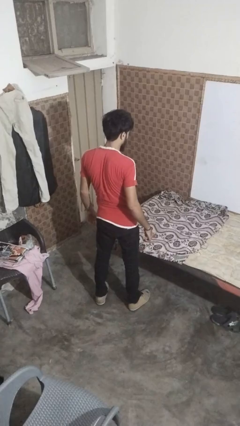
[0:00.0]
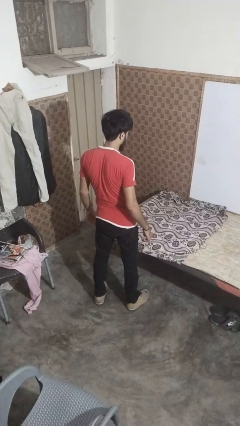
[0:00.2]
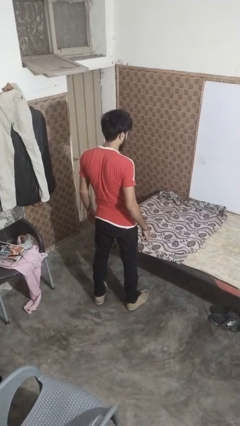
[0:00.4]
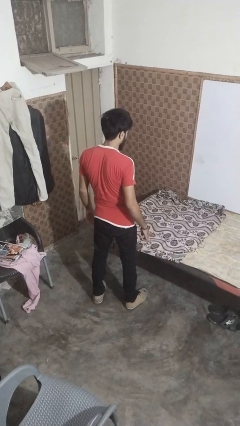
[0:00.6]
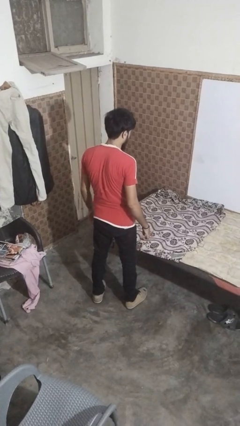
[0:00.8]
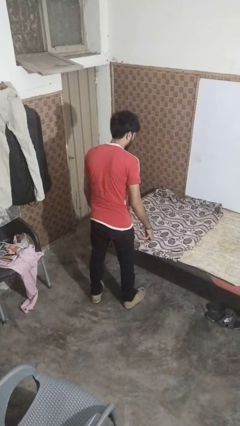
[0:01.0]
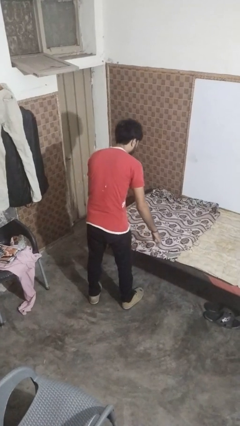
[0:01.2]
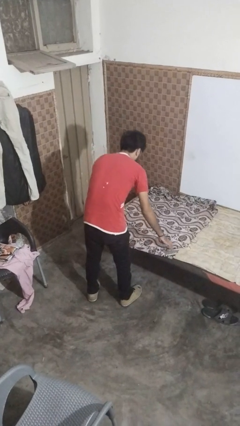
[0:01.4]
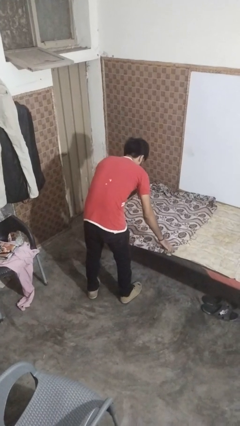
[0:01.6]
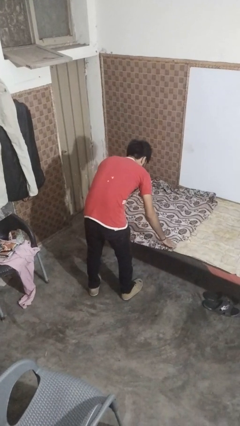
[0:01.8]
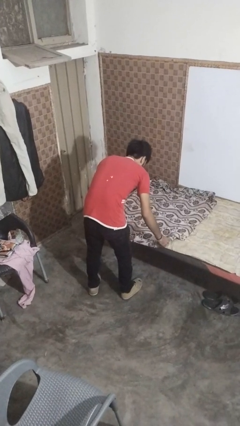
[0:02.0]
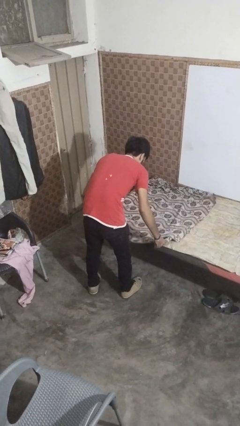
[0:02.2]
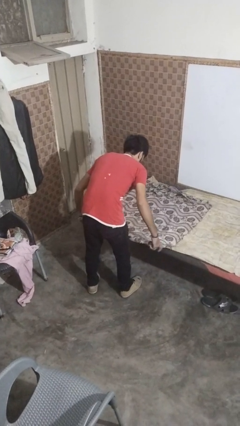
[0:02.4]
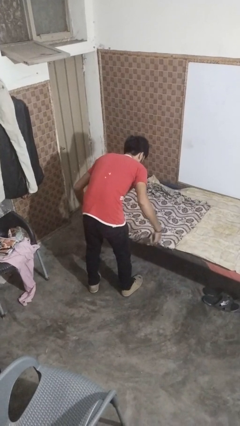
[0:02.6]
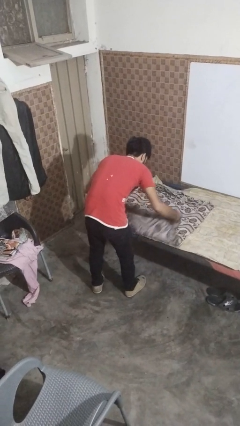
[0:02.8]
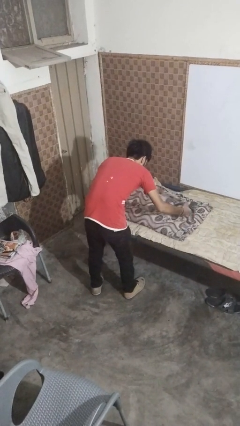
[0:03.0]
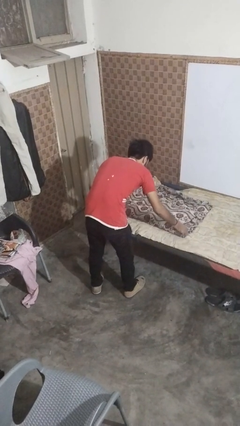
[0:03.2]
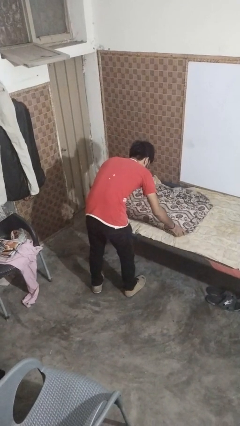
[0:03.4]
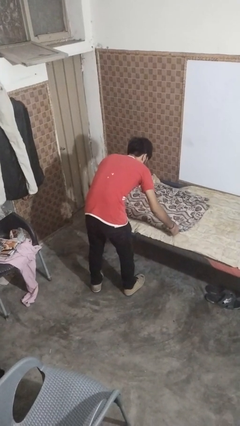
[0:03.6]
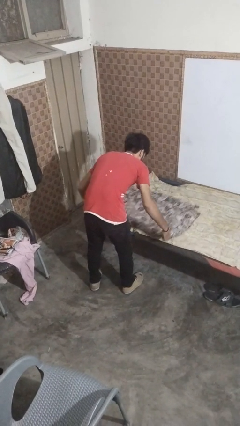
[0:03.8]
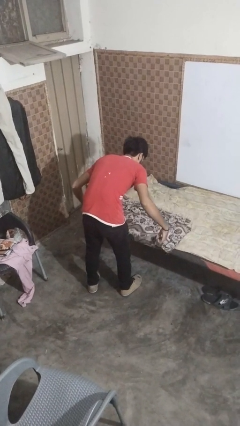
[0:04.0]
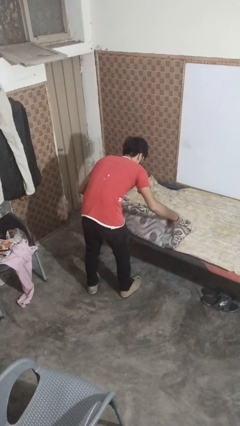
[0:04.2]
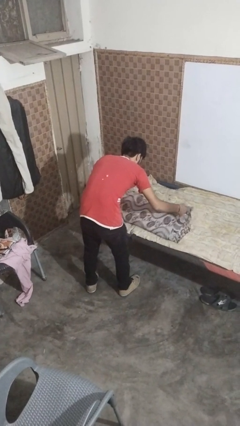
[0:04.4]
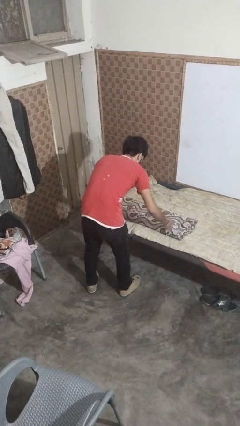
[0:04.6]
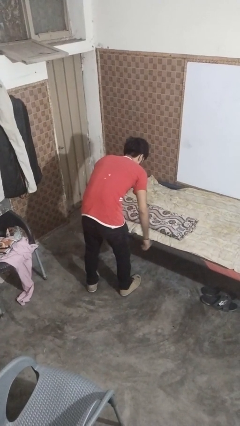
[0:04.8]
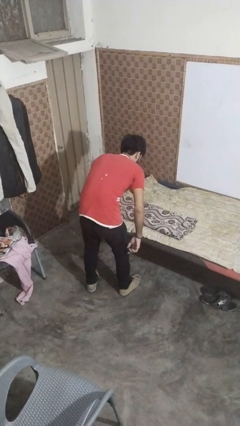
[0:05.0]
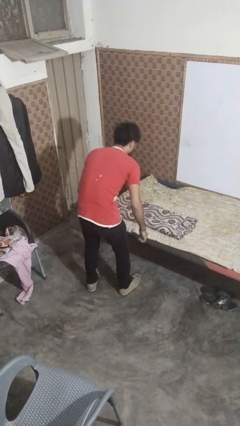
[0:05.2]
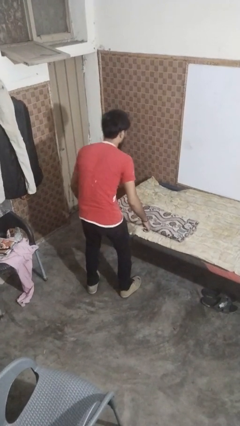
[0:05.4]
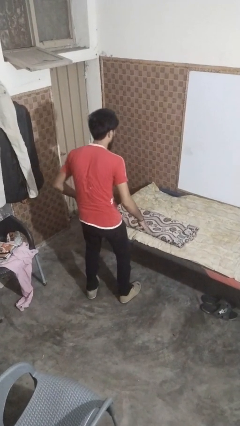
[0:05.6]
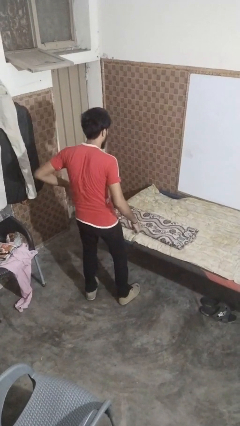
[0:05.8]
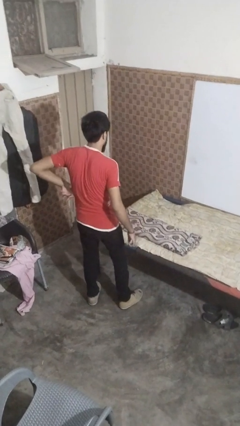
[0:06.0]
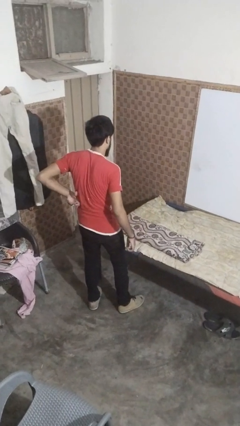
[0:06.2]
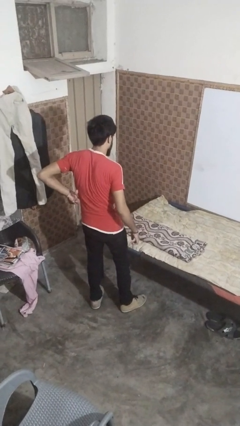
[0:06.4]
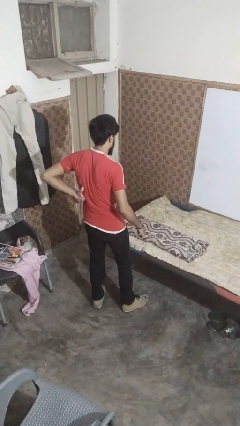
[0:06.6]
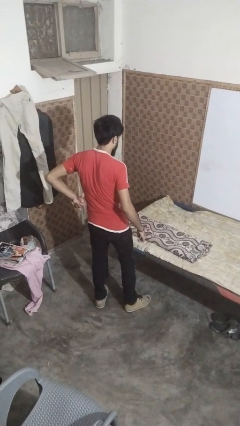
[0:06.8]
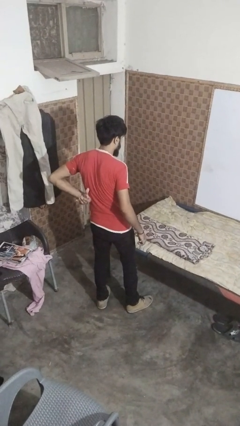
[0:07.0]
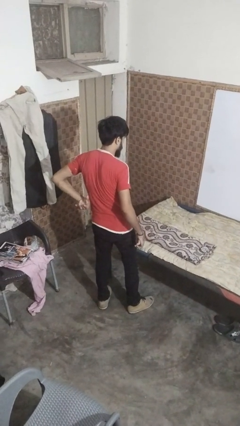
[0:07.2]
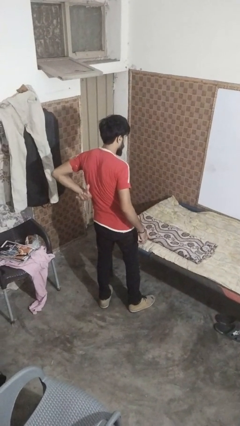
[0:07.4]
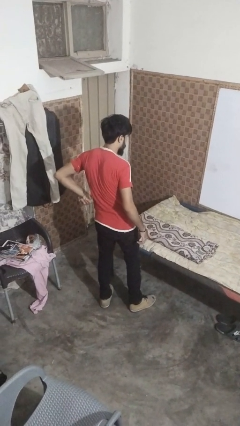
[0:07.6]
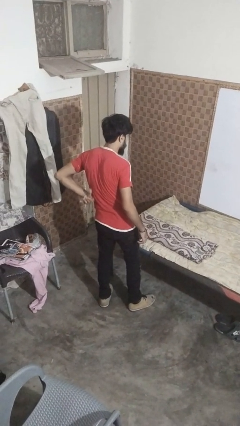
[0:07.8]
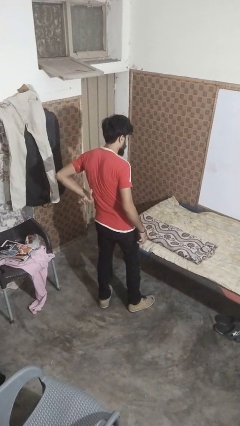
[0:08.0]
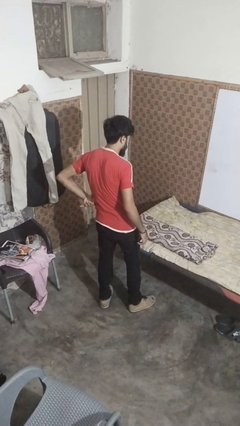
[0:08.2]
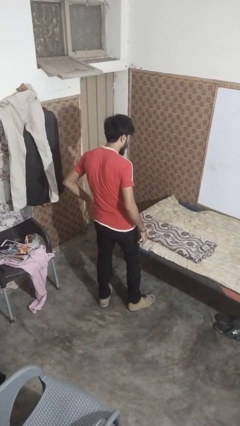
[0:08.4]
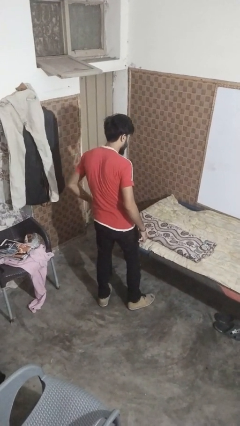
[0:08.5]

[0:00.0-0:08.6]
person folds blanket

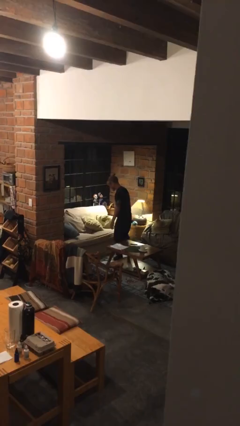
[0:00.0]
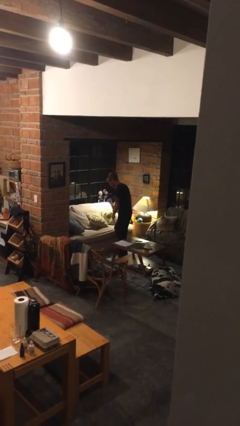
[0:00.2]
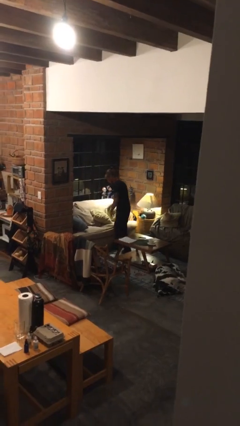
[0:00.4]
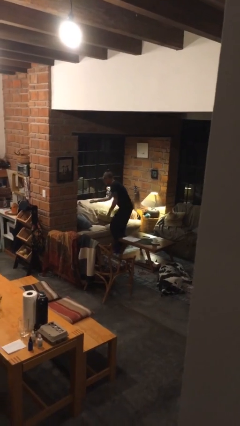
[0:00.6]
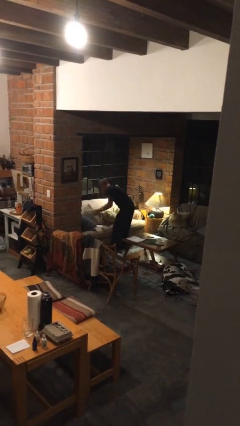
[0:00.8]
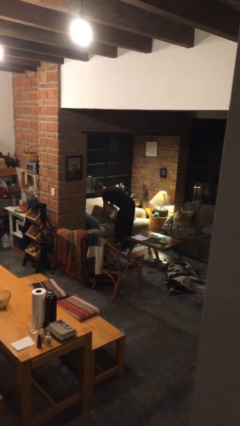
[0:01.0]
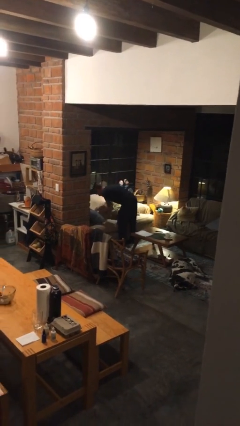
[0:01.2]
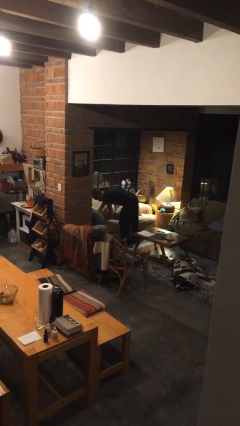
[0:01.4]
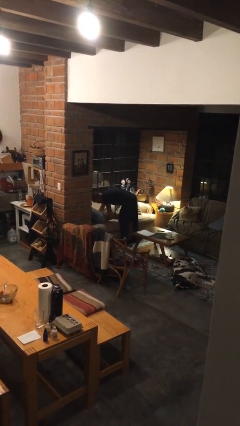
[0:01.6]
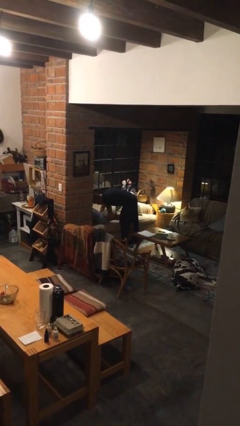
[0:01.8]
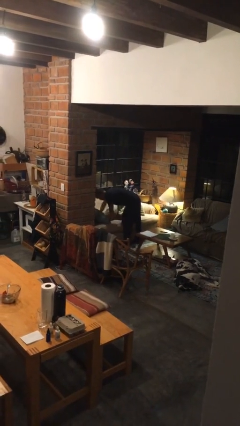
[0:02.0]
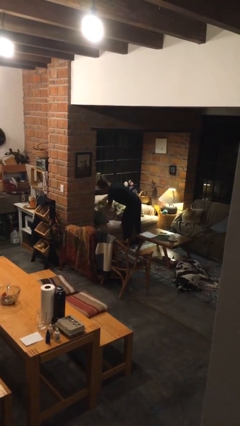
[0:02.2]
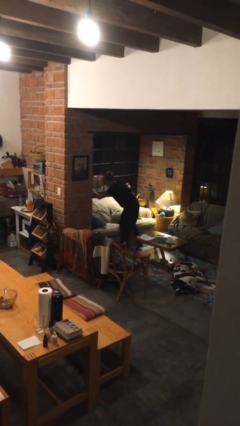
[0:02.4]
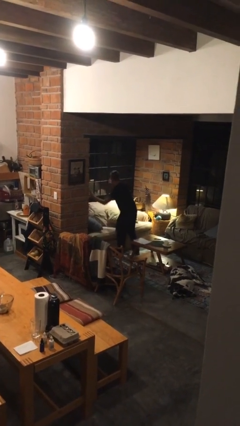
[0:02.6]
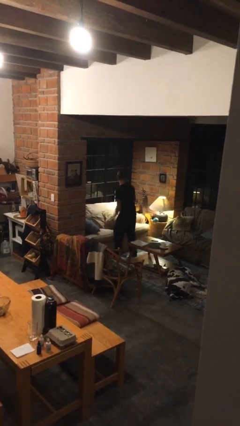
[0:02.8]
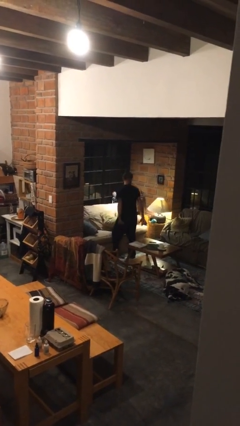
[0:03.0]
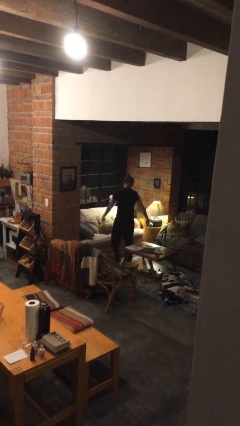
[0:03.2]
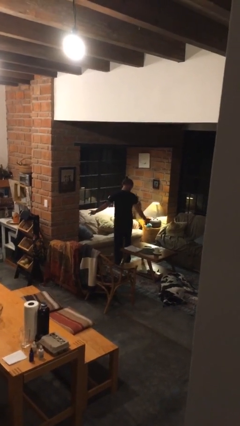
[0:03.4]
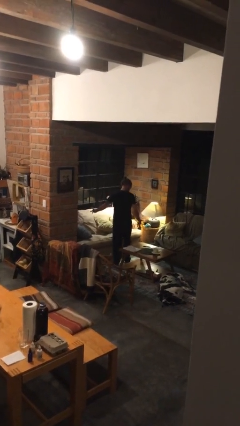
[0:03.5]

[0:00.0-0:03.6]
person searches in couch

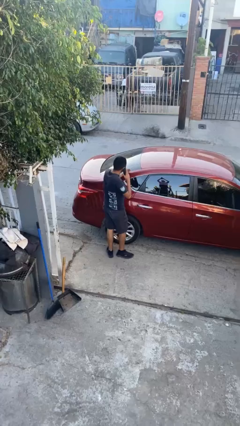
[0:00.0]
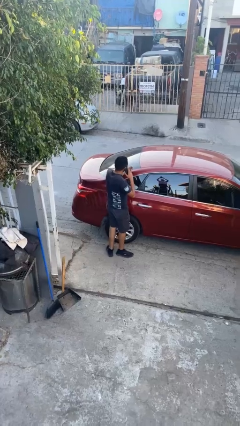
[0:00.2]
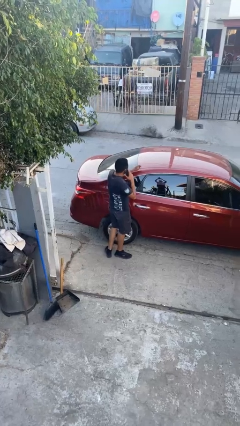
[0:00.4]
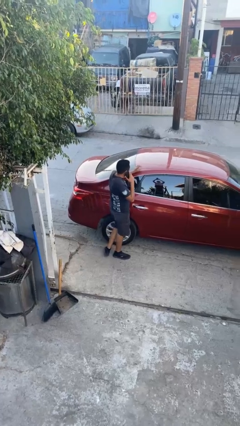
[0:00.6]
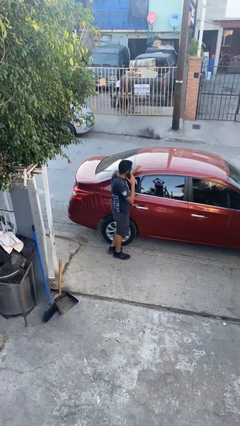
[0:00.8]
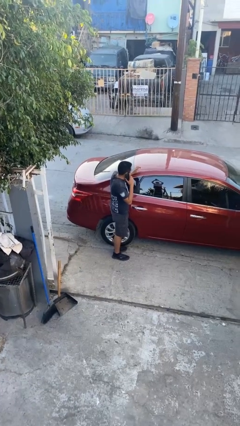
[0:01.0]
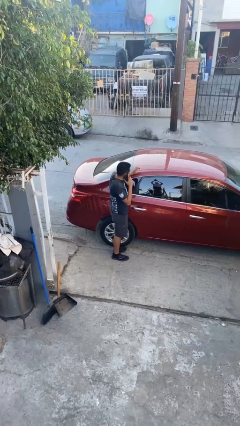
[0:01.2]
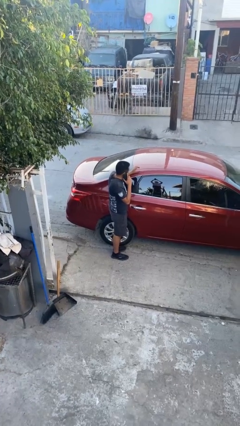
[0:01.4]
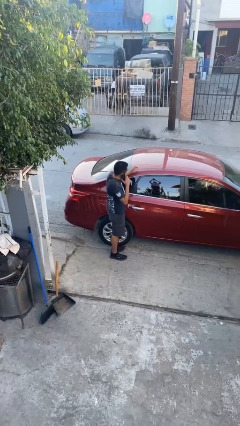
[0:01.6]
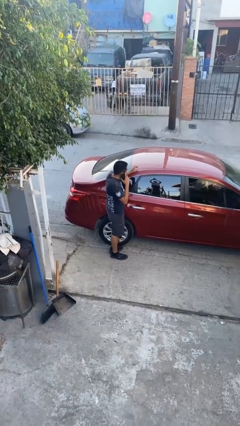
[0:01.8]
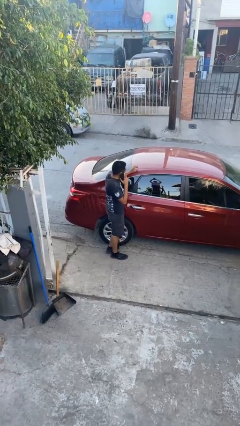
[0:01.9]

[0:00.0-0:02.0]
person leans against car

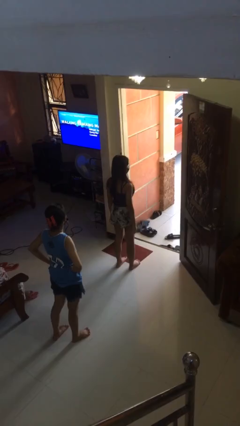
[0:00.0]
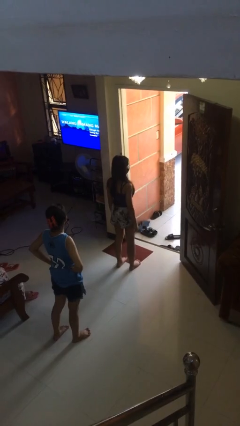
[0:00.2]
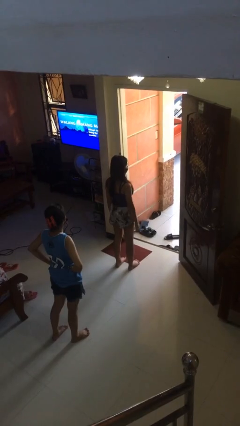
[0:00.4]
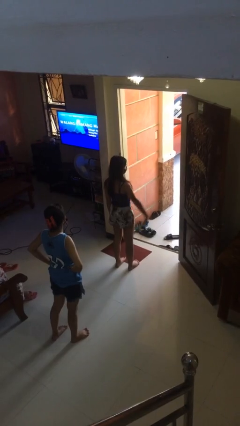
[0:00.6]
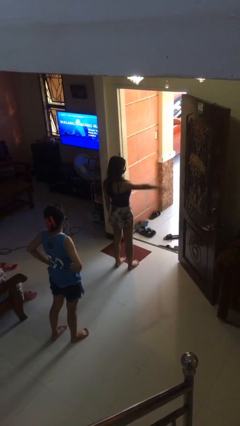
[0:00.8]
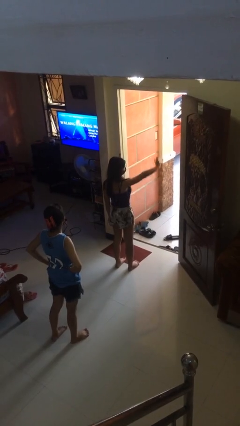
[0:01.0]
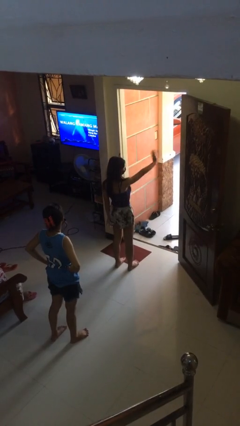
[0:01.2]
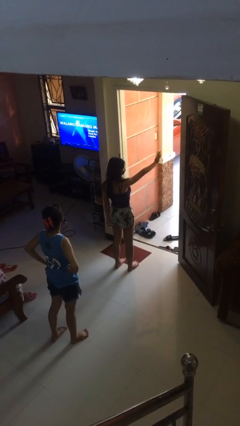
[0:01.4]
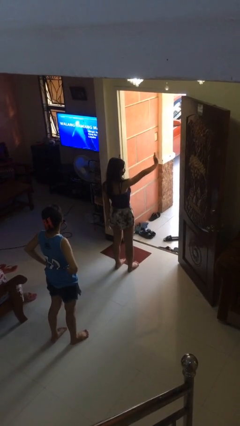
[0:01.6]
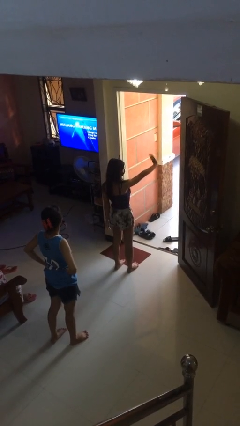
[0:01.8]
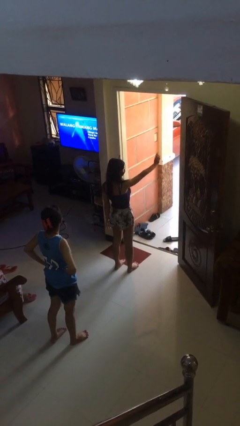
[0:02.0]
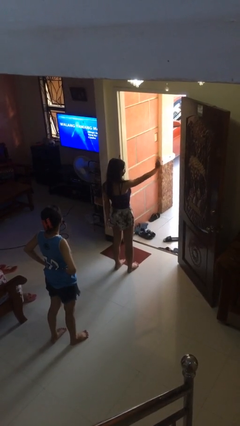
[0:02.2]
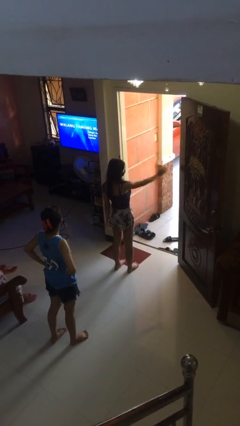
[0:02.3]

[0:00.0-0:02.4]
person waves at person

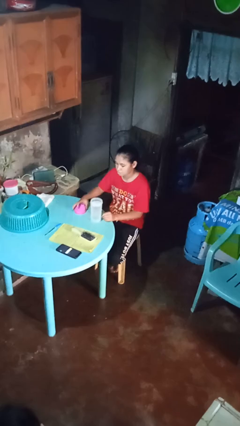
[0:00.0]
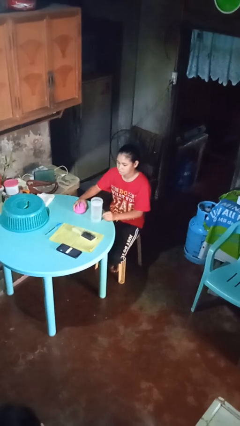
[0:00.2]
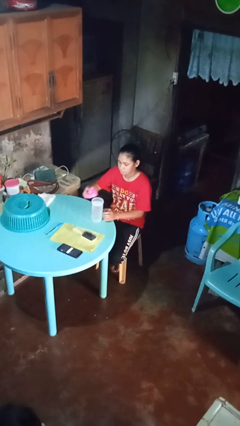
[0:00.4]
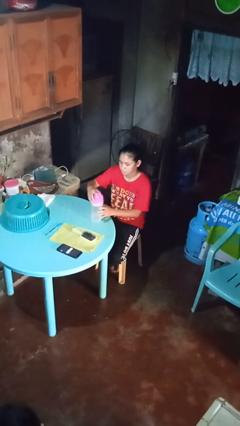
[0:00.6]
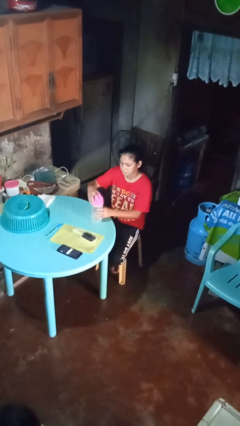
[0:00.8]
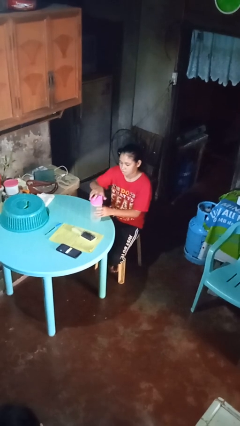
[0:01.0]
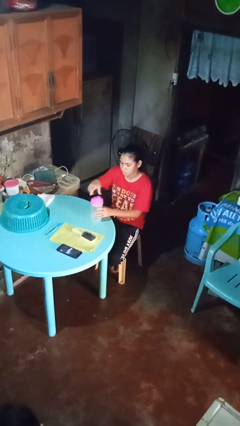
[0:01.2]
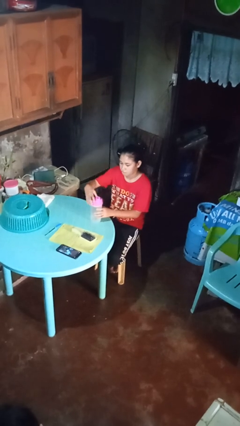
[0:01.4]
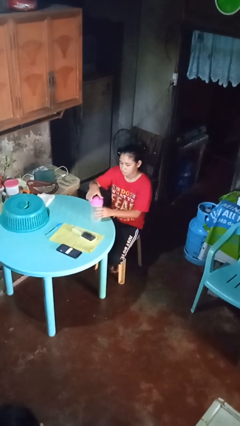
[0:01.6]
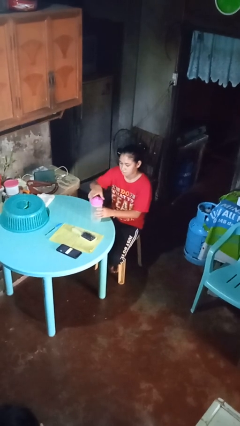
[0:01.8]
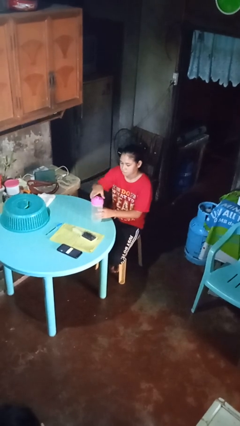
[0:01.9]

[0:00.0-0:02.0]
person screws lid to bottle
